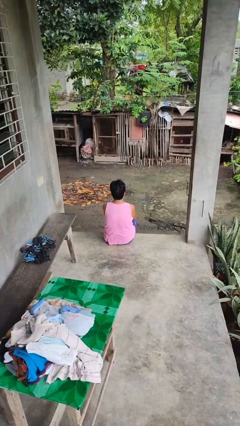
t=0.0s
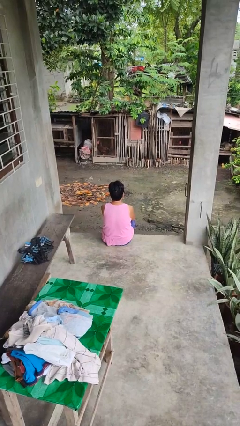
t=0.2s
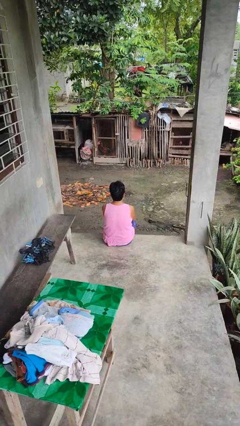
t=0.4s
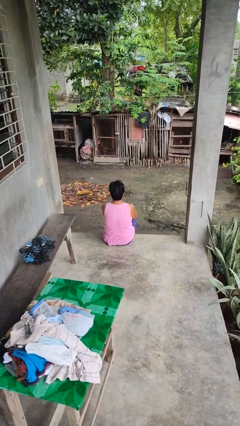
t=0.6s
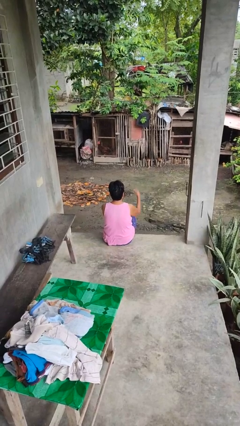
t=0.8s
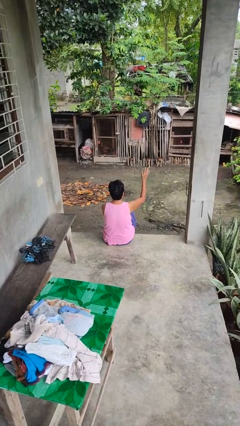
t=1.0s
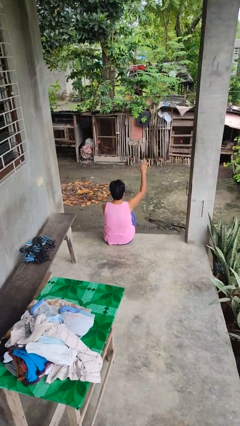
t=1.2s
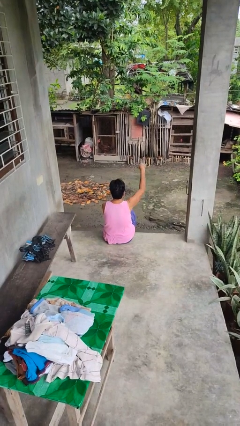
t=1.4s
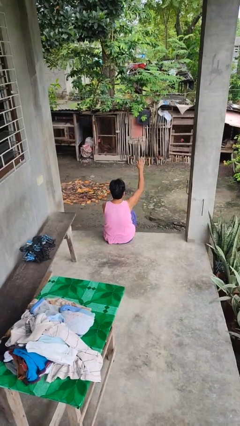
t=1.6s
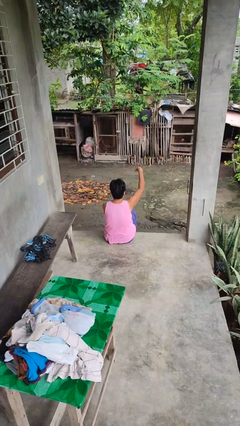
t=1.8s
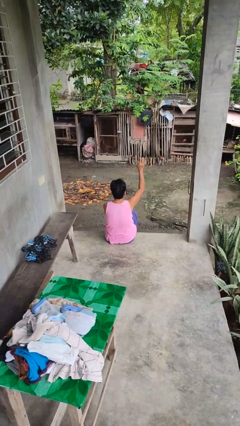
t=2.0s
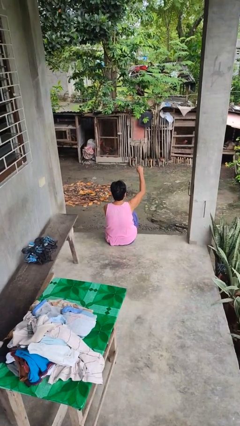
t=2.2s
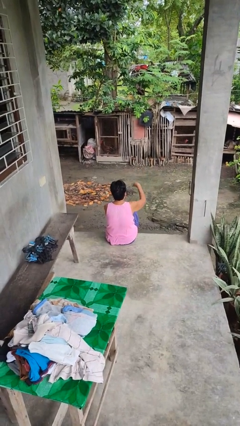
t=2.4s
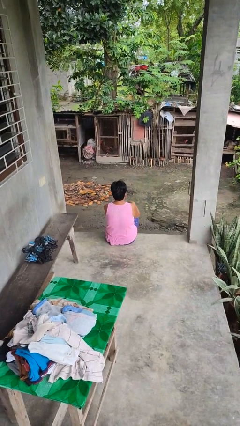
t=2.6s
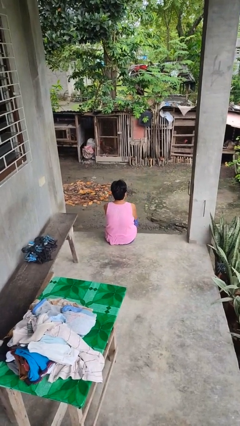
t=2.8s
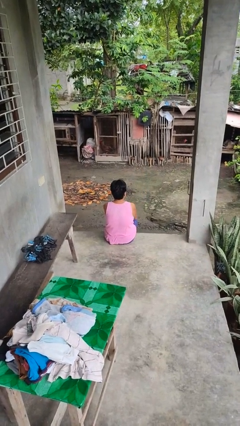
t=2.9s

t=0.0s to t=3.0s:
person gestures come here

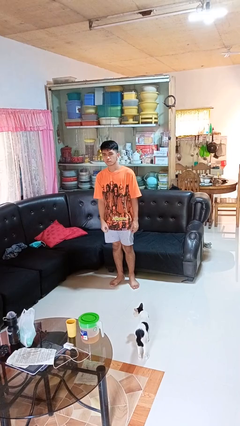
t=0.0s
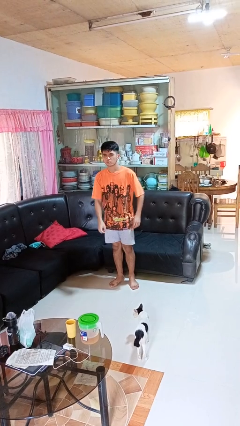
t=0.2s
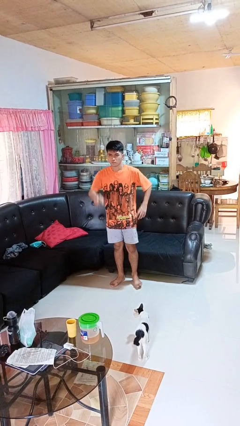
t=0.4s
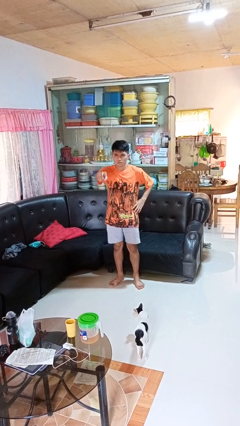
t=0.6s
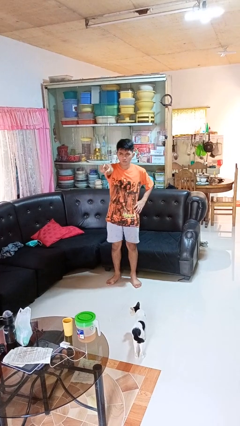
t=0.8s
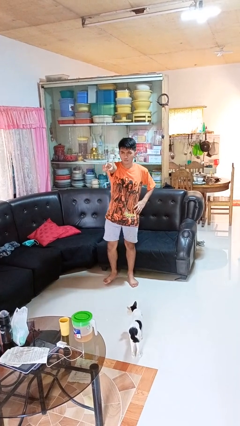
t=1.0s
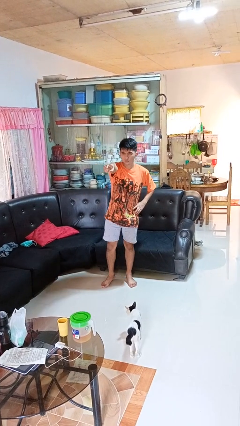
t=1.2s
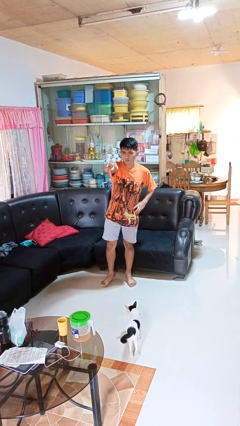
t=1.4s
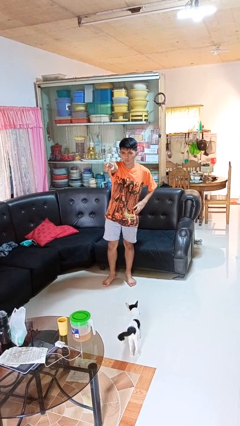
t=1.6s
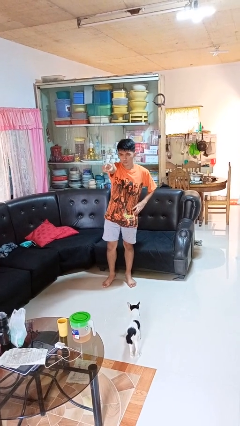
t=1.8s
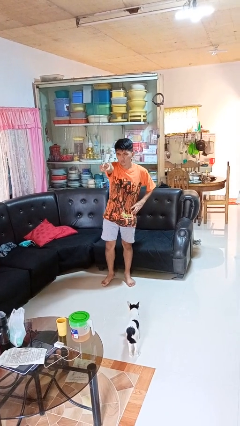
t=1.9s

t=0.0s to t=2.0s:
person points at person

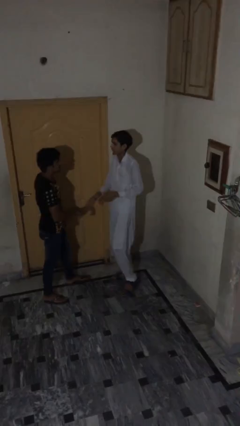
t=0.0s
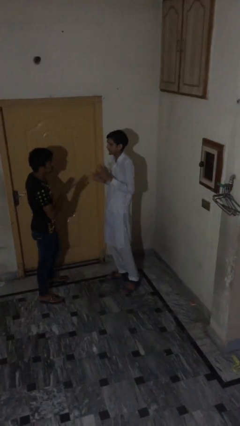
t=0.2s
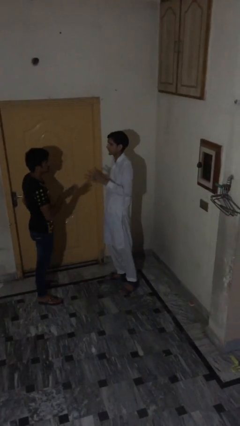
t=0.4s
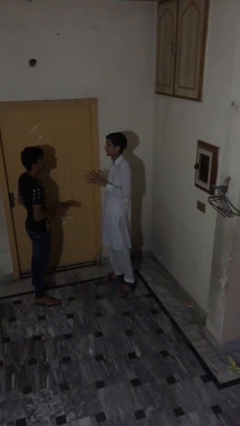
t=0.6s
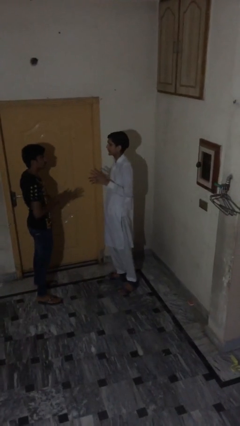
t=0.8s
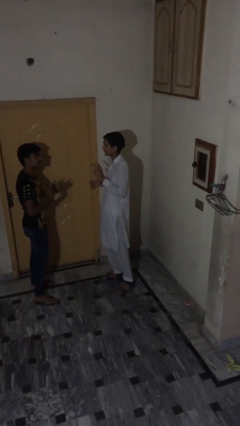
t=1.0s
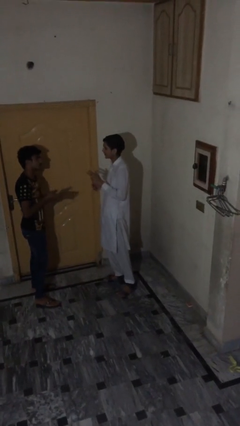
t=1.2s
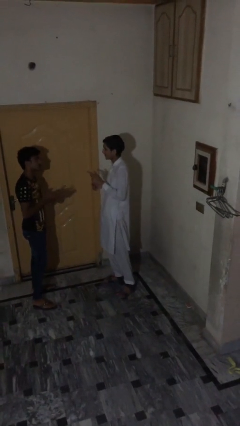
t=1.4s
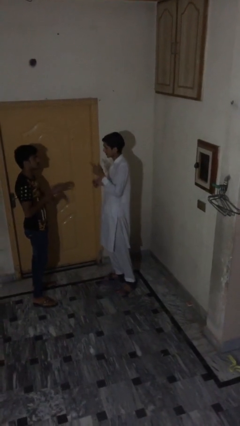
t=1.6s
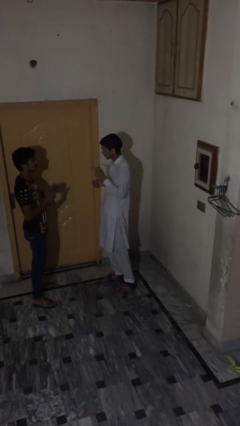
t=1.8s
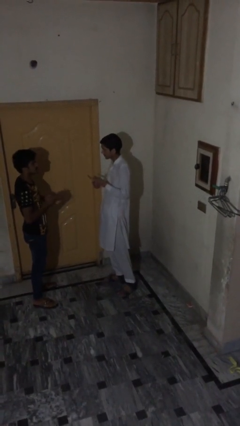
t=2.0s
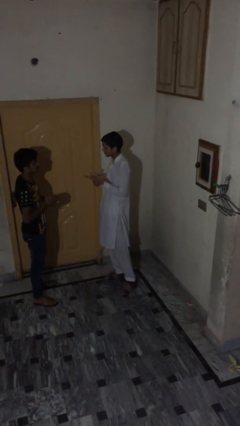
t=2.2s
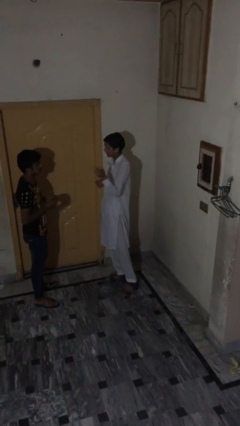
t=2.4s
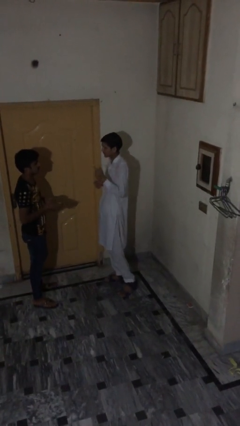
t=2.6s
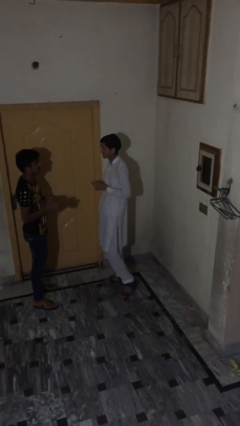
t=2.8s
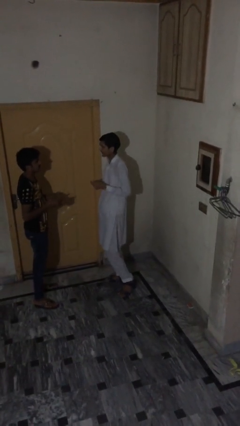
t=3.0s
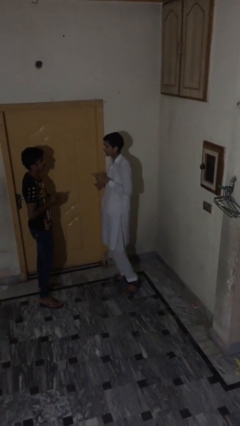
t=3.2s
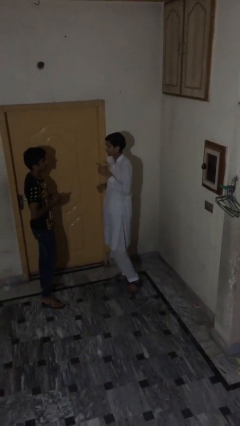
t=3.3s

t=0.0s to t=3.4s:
person talks to person

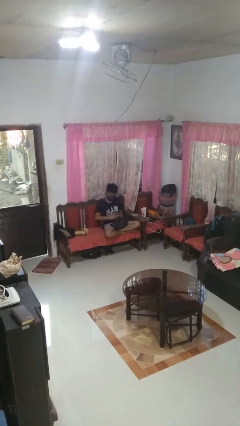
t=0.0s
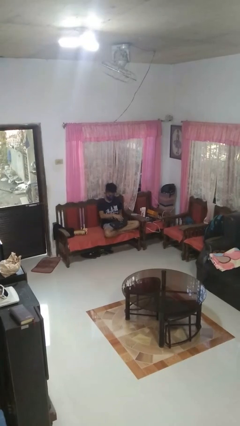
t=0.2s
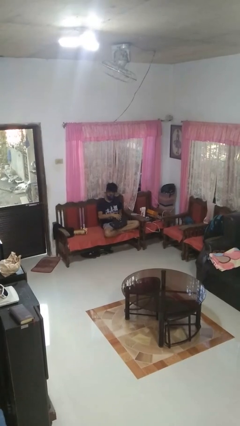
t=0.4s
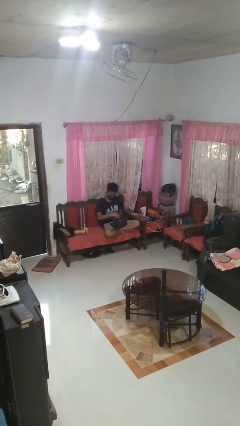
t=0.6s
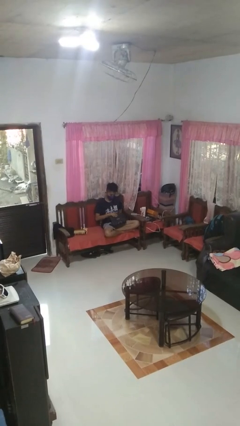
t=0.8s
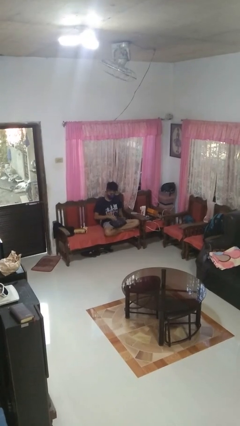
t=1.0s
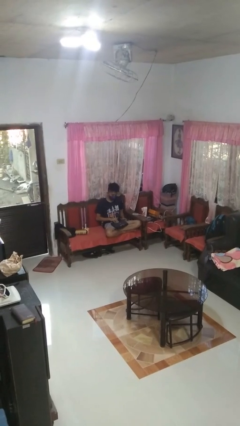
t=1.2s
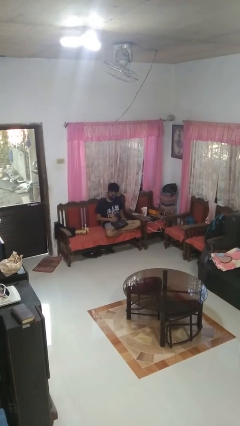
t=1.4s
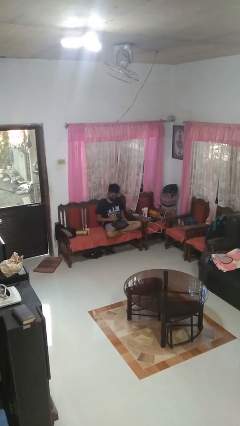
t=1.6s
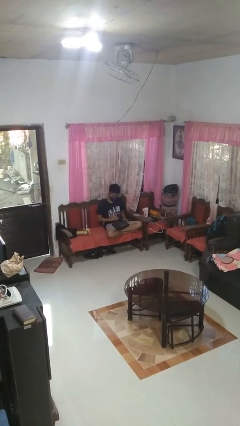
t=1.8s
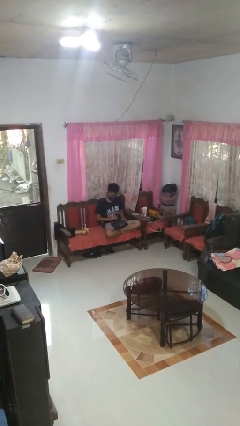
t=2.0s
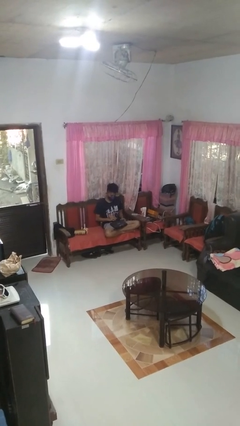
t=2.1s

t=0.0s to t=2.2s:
person closes laptop

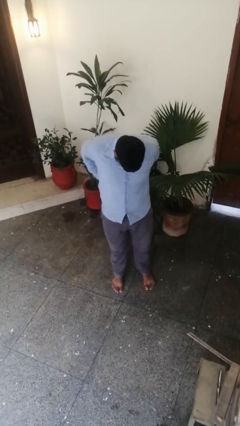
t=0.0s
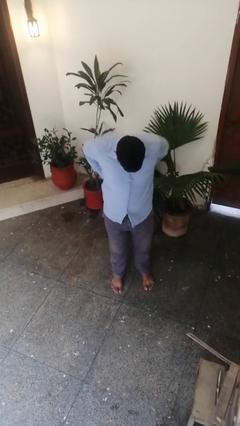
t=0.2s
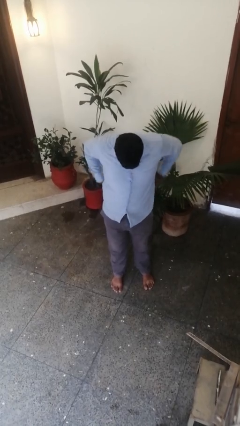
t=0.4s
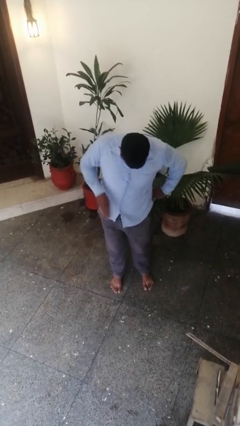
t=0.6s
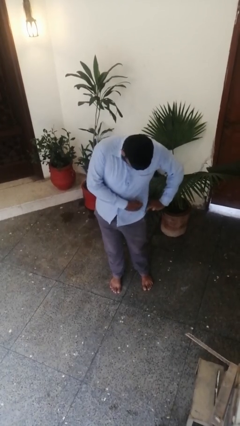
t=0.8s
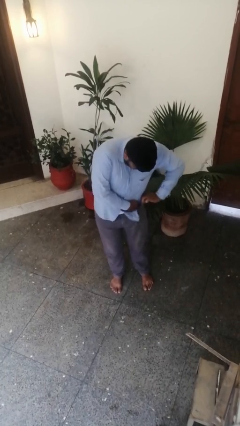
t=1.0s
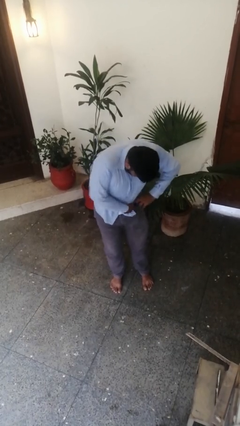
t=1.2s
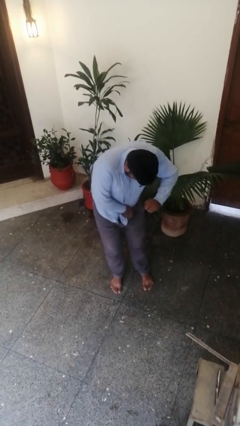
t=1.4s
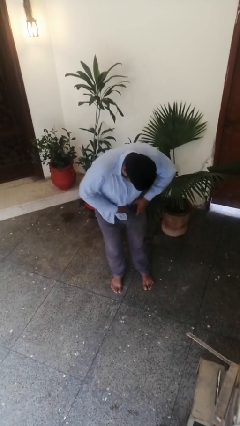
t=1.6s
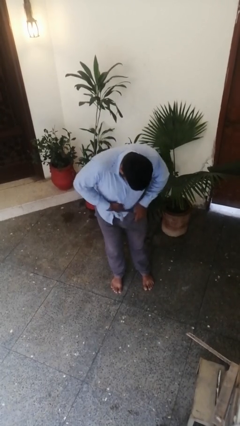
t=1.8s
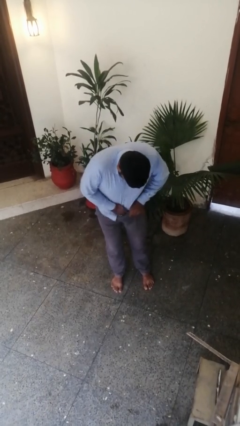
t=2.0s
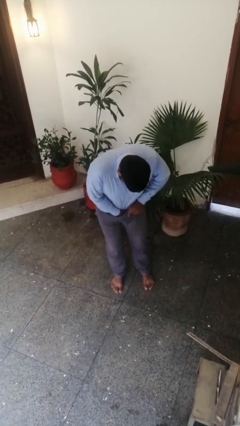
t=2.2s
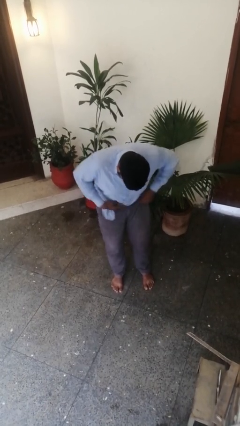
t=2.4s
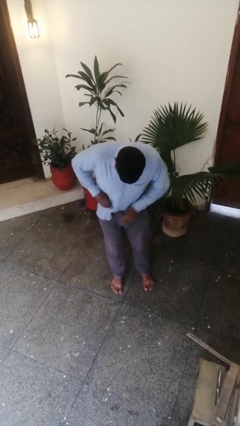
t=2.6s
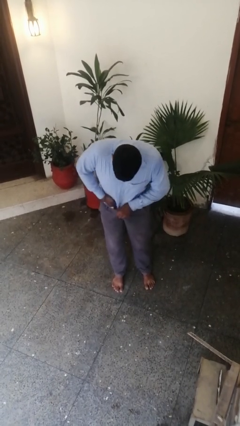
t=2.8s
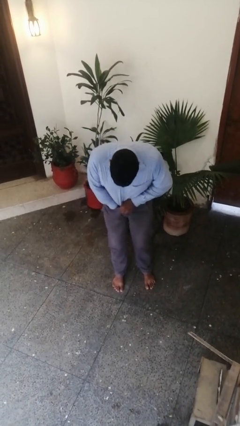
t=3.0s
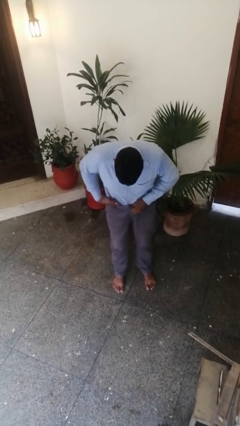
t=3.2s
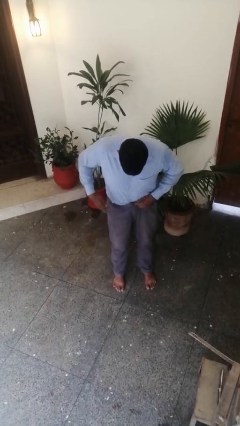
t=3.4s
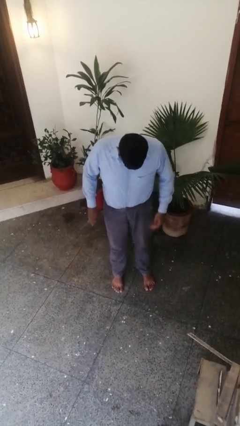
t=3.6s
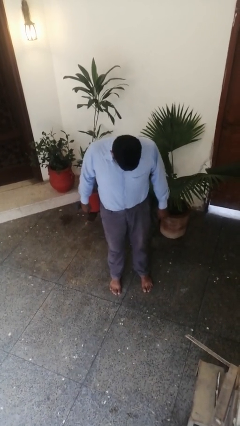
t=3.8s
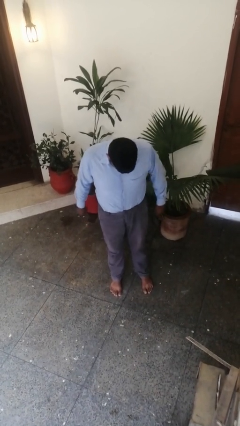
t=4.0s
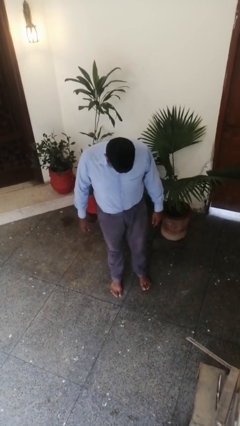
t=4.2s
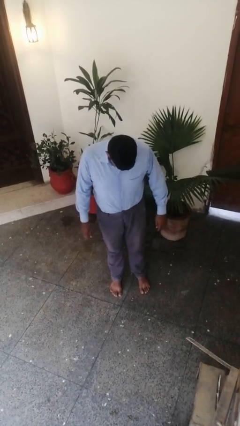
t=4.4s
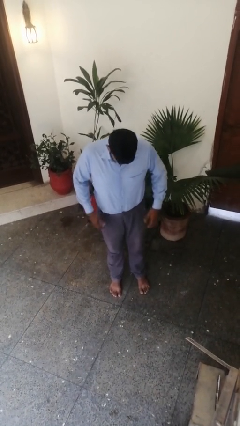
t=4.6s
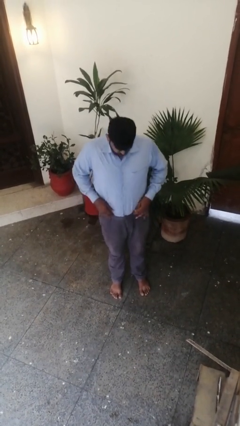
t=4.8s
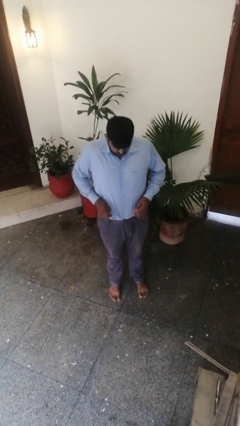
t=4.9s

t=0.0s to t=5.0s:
person tucks in shirt

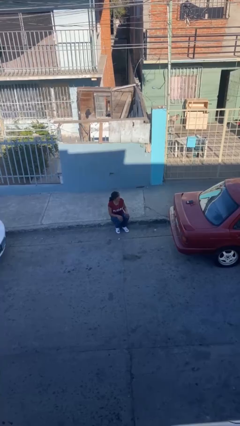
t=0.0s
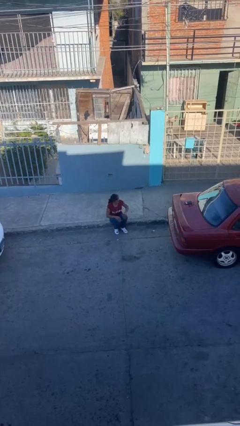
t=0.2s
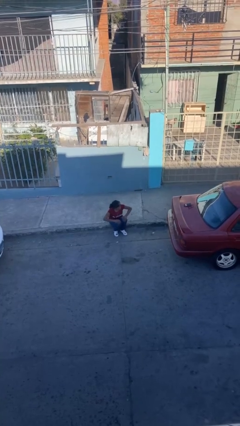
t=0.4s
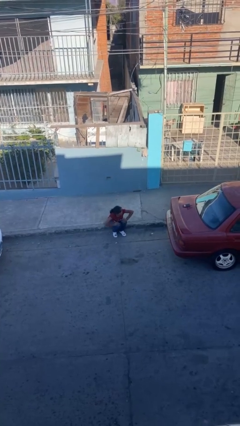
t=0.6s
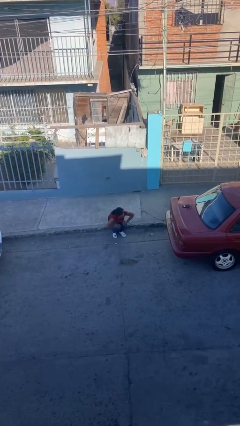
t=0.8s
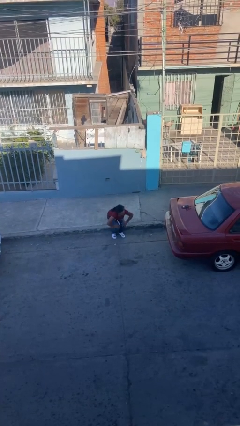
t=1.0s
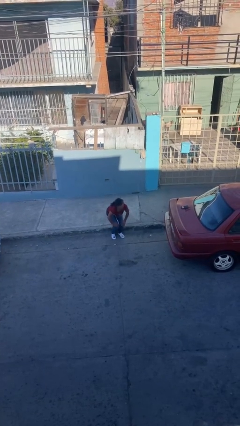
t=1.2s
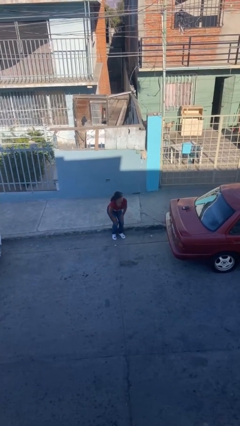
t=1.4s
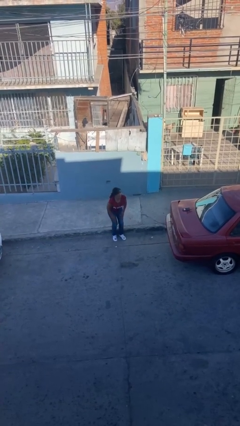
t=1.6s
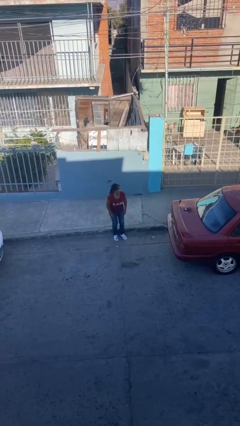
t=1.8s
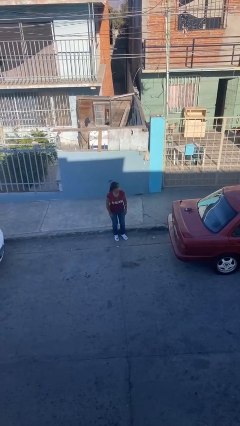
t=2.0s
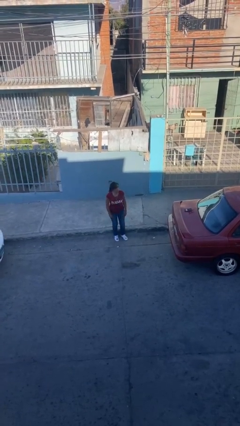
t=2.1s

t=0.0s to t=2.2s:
person stands up
